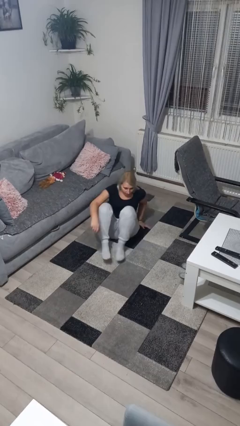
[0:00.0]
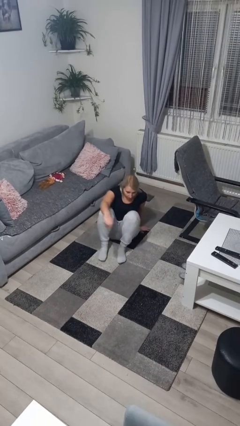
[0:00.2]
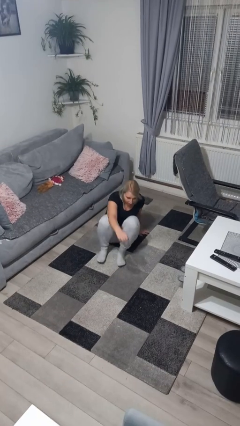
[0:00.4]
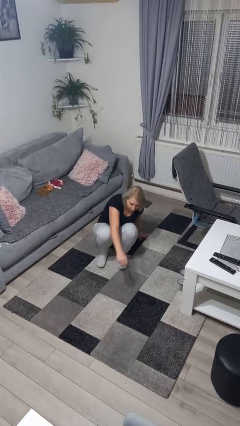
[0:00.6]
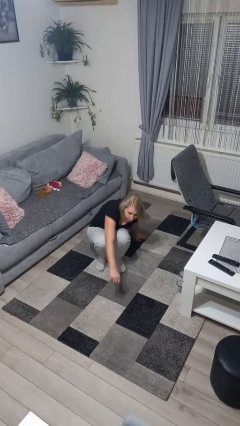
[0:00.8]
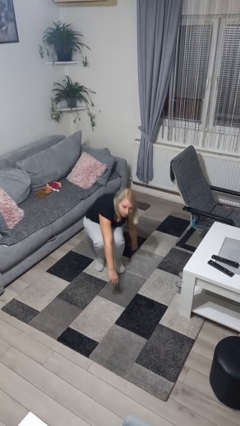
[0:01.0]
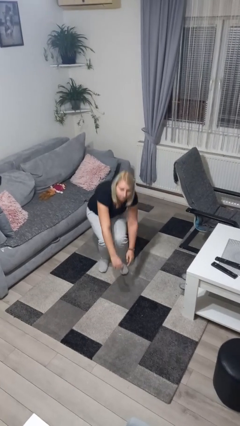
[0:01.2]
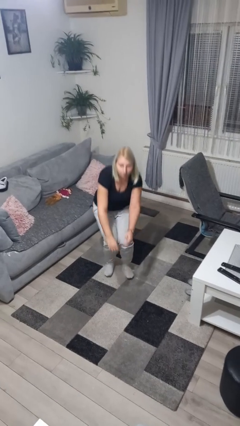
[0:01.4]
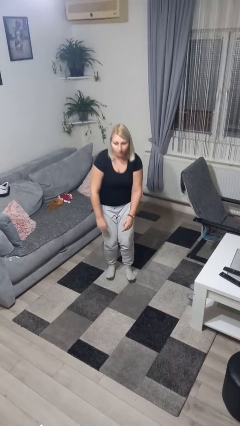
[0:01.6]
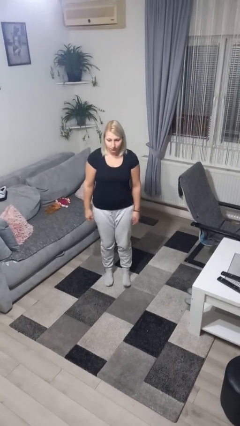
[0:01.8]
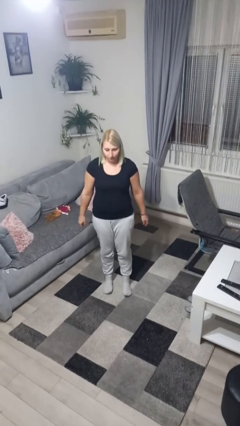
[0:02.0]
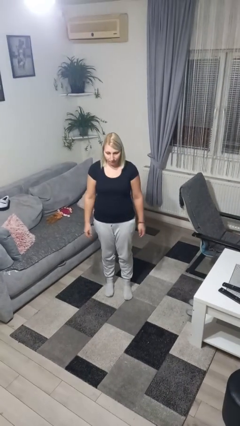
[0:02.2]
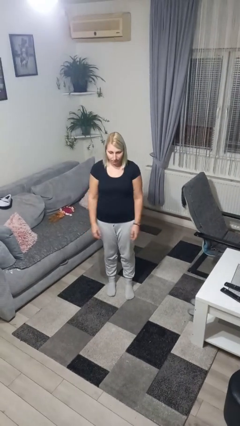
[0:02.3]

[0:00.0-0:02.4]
person stands up from floor

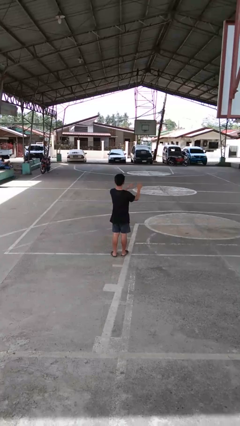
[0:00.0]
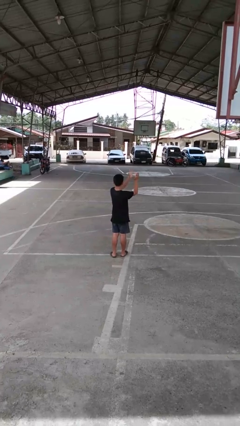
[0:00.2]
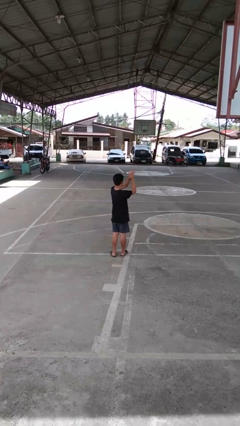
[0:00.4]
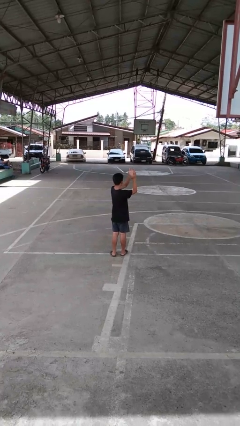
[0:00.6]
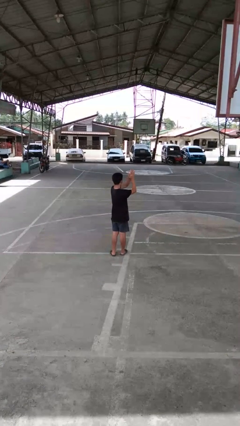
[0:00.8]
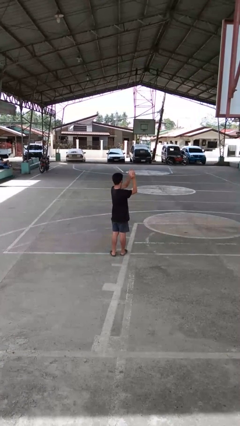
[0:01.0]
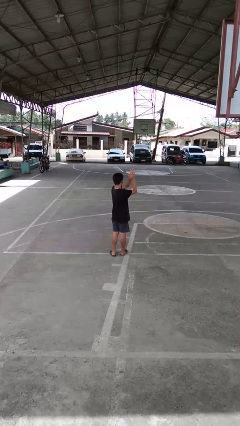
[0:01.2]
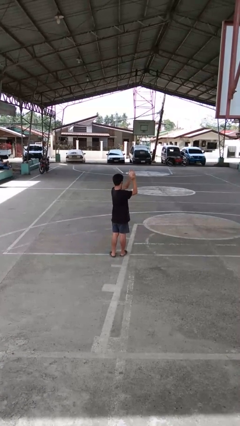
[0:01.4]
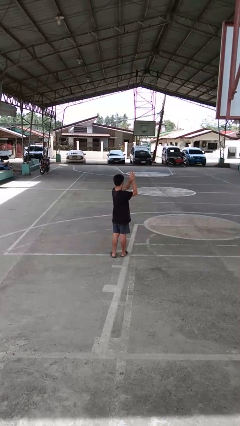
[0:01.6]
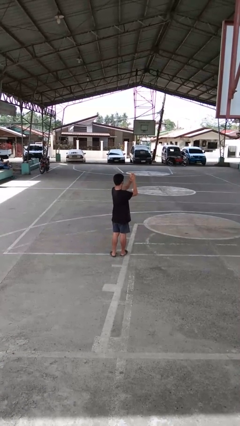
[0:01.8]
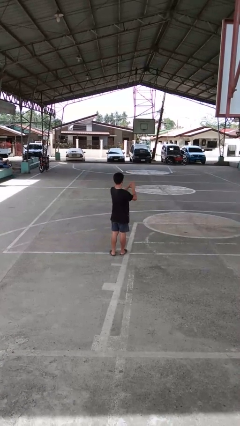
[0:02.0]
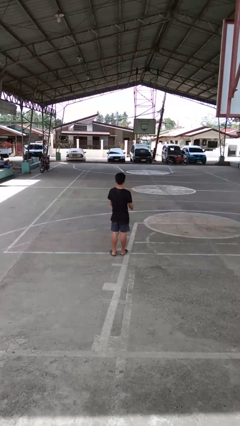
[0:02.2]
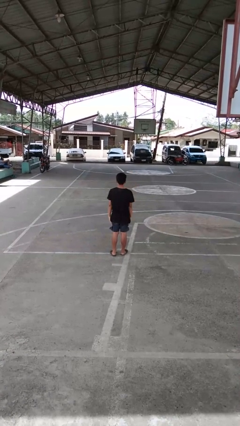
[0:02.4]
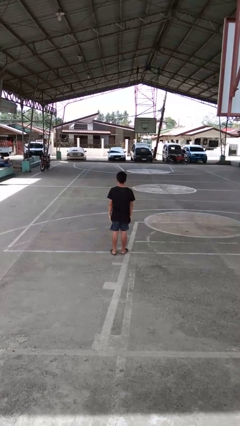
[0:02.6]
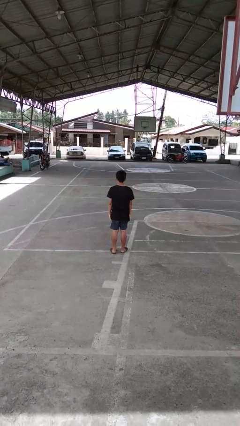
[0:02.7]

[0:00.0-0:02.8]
person claps hands

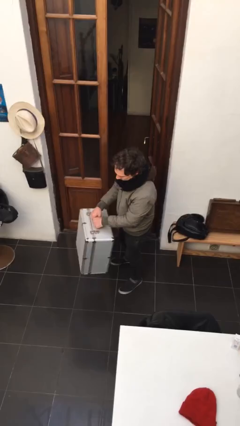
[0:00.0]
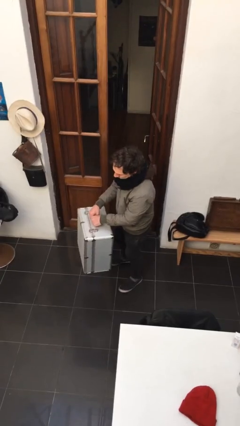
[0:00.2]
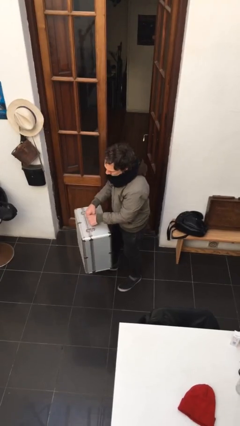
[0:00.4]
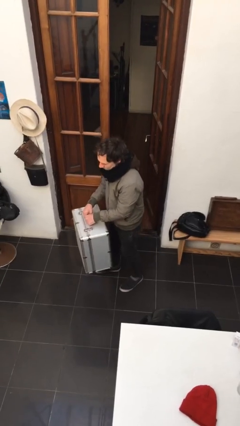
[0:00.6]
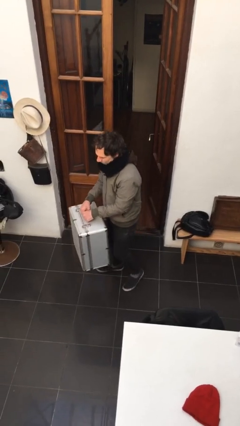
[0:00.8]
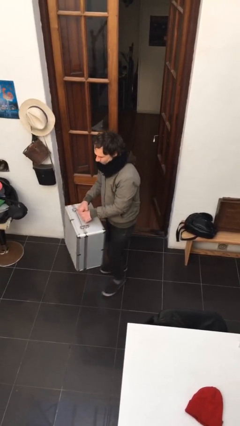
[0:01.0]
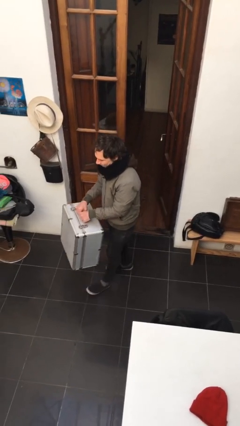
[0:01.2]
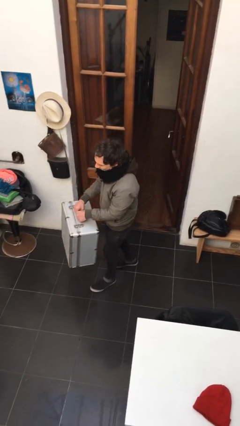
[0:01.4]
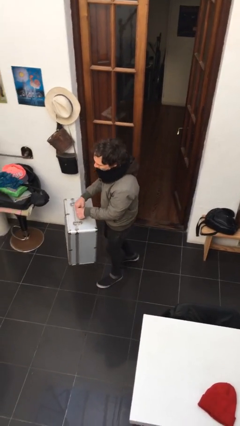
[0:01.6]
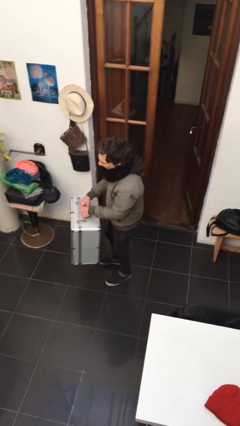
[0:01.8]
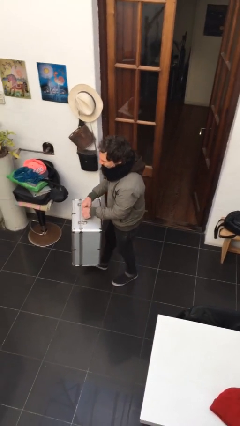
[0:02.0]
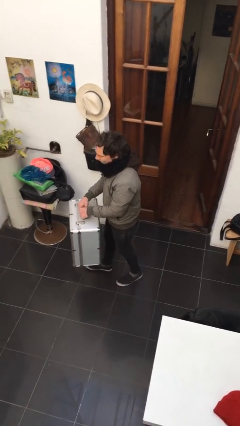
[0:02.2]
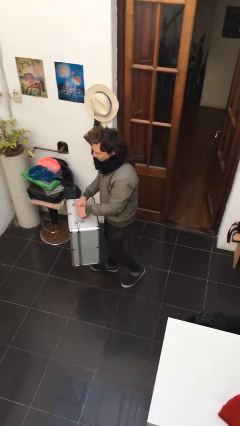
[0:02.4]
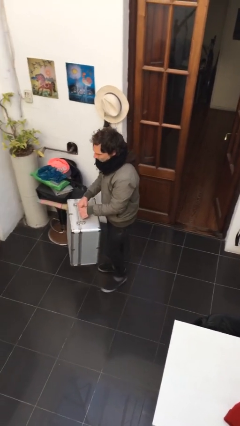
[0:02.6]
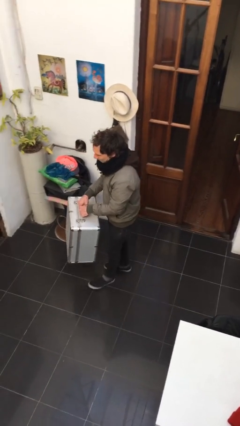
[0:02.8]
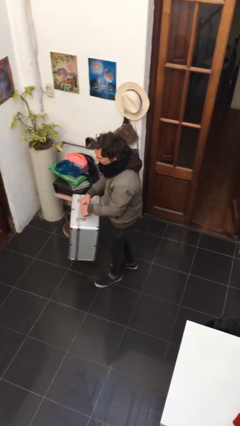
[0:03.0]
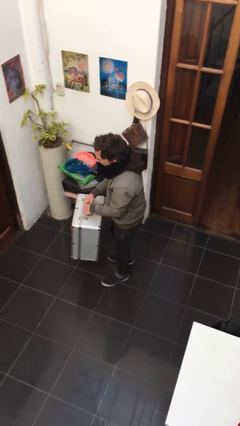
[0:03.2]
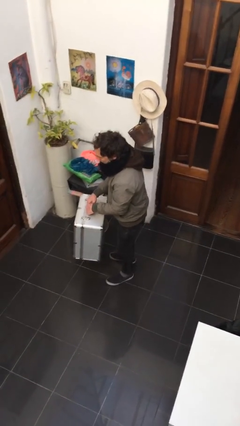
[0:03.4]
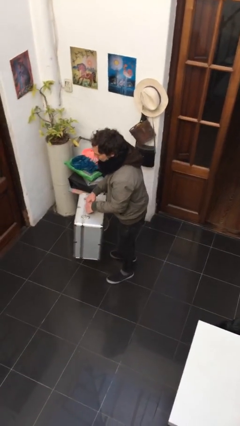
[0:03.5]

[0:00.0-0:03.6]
person carries heavy object

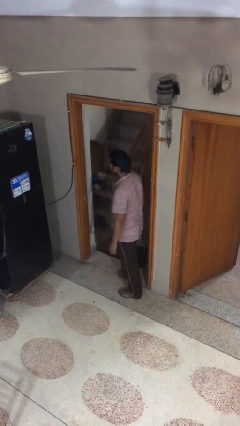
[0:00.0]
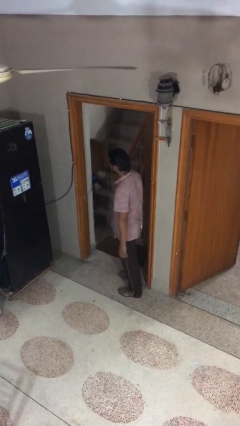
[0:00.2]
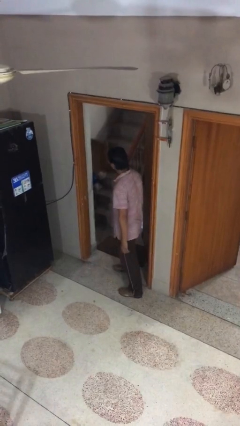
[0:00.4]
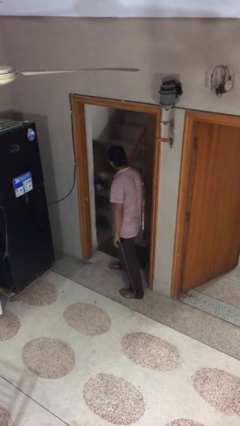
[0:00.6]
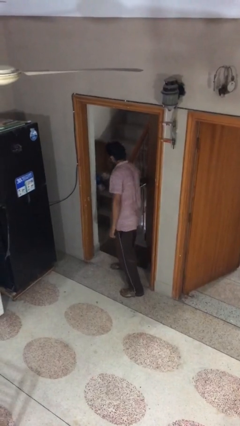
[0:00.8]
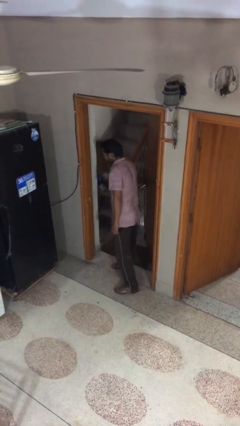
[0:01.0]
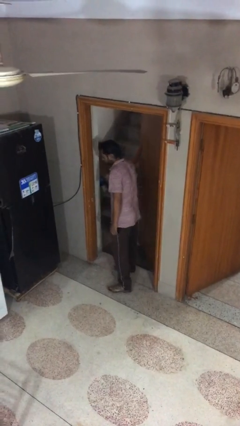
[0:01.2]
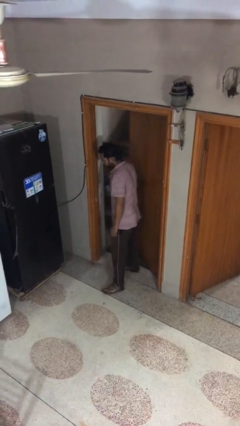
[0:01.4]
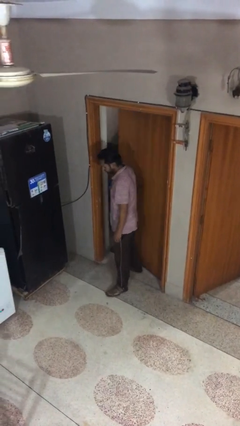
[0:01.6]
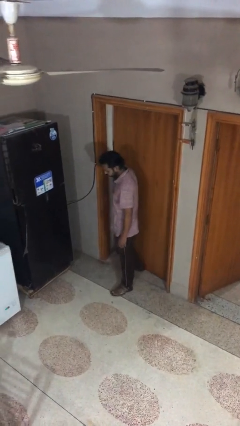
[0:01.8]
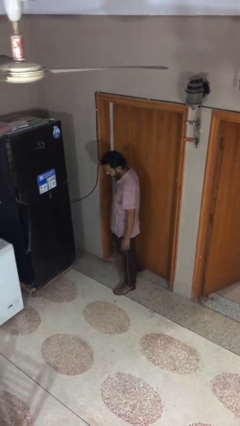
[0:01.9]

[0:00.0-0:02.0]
person closes facility door

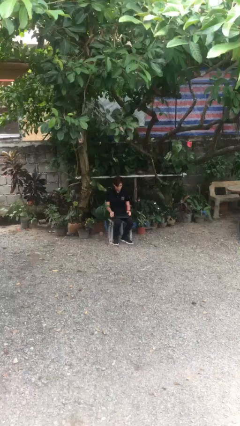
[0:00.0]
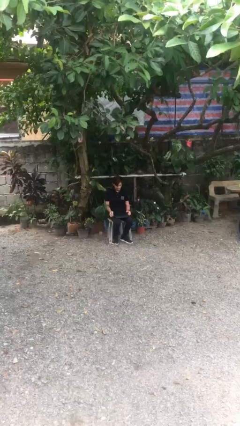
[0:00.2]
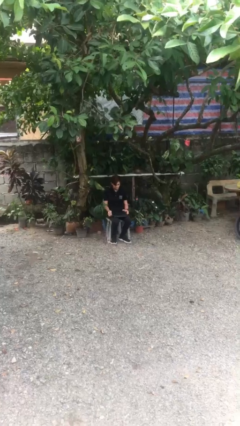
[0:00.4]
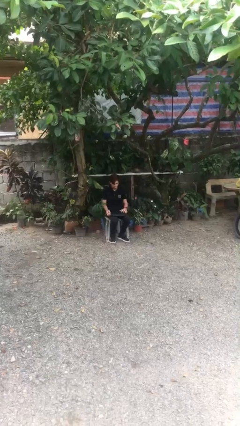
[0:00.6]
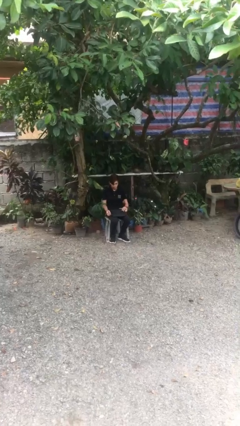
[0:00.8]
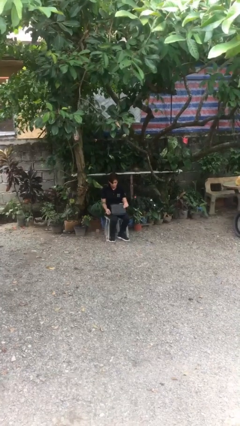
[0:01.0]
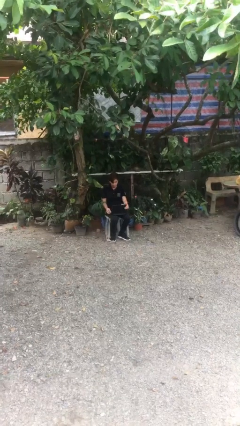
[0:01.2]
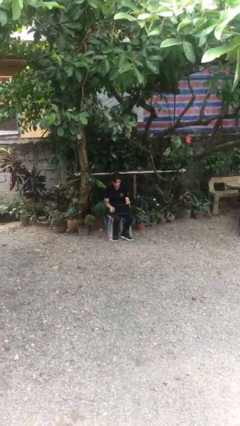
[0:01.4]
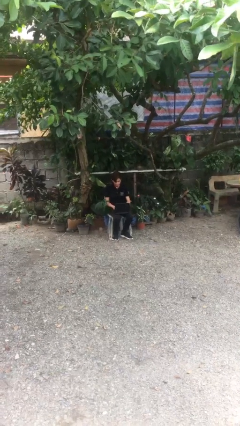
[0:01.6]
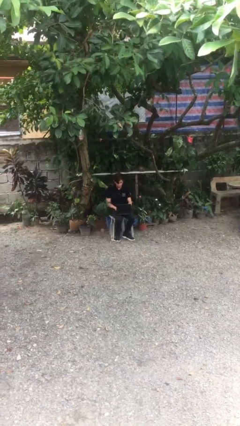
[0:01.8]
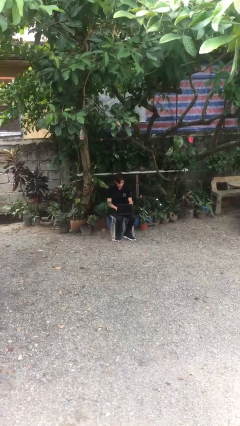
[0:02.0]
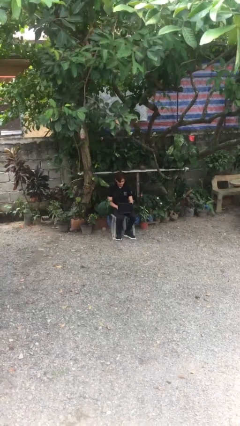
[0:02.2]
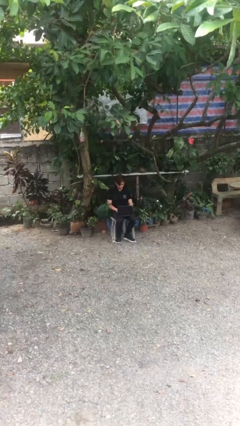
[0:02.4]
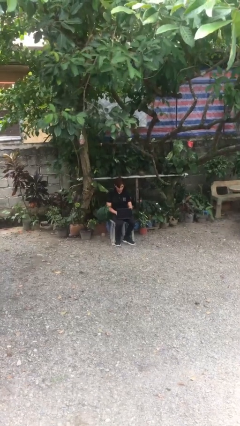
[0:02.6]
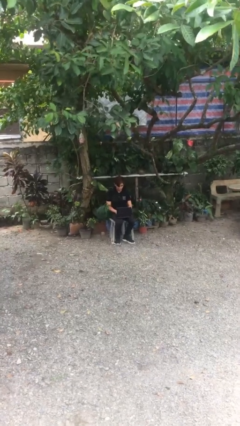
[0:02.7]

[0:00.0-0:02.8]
person interacts with laptop

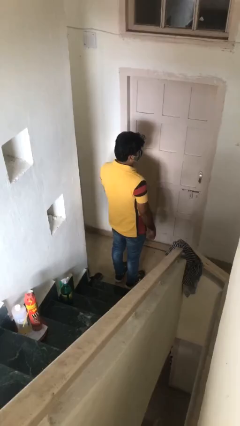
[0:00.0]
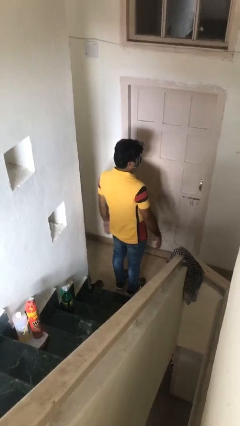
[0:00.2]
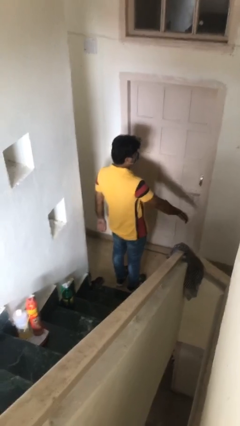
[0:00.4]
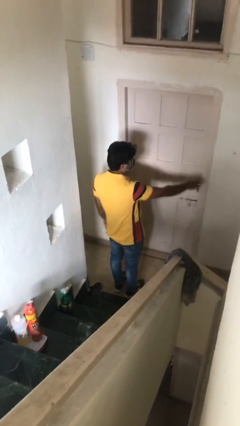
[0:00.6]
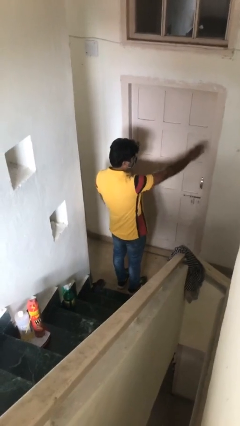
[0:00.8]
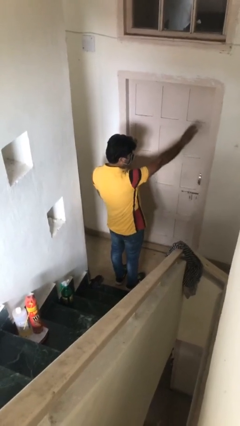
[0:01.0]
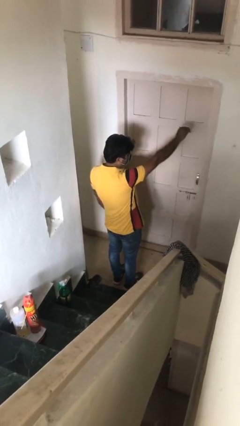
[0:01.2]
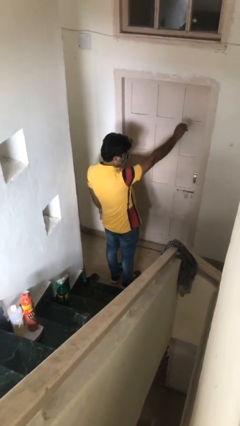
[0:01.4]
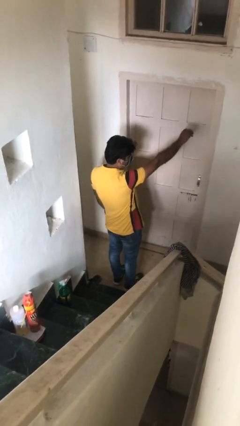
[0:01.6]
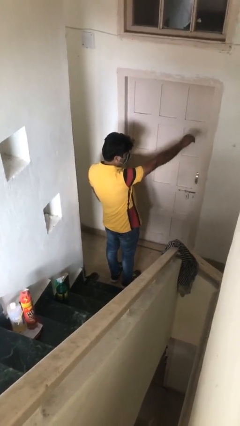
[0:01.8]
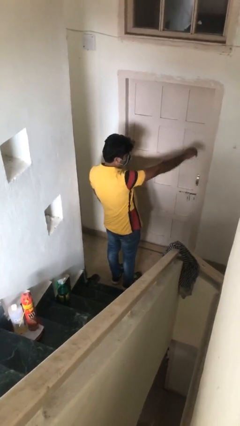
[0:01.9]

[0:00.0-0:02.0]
person gestures come here

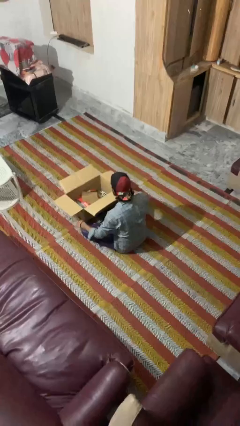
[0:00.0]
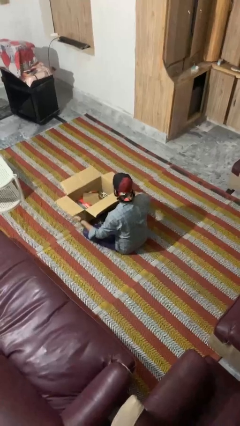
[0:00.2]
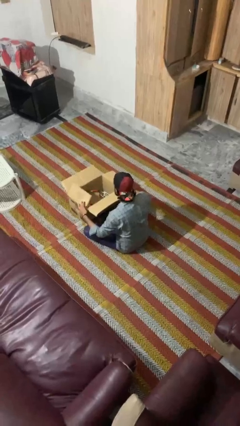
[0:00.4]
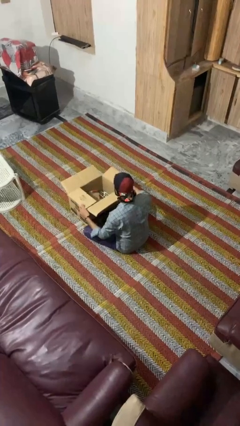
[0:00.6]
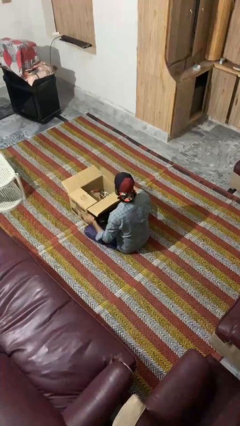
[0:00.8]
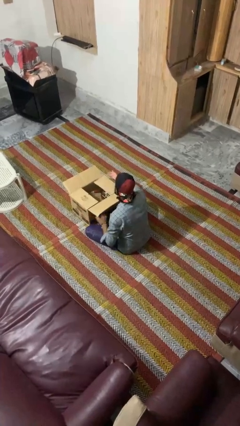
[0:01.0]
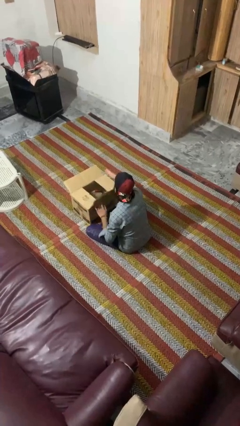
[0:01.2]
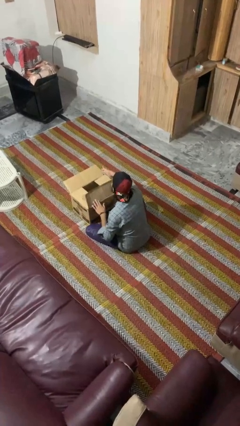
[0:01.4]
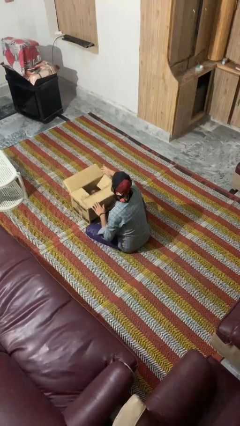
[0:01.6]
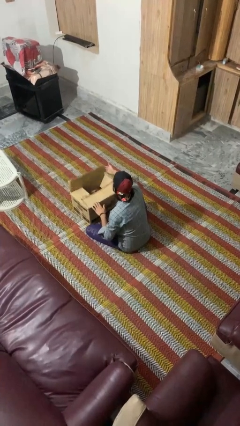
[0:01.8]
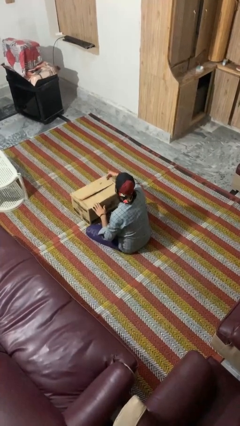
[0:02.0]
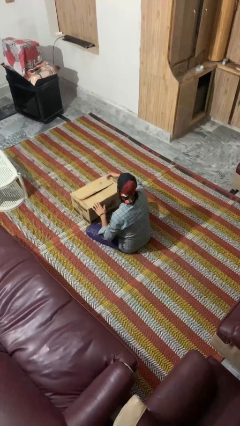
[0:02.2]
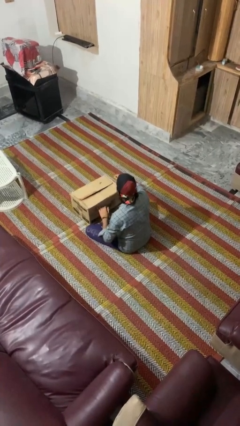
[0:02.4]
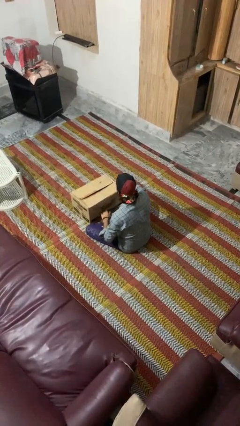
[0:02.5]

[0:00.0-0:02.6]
person closes box
